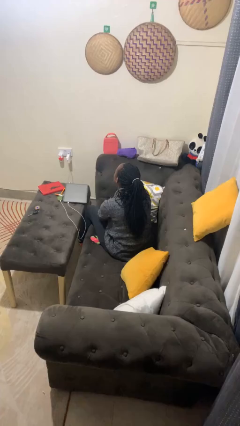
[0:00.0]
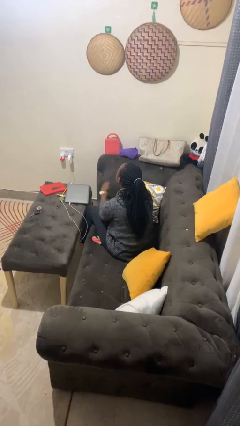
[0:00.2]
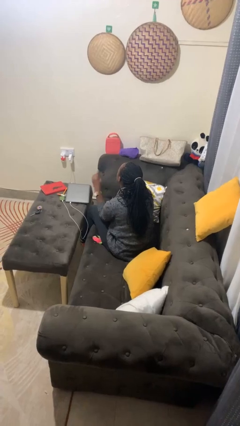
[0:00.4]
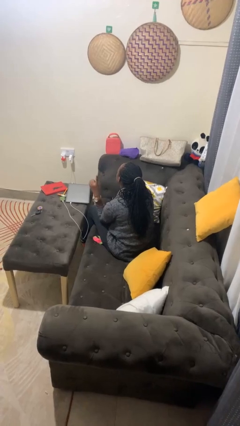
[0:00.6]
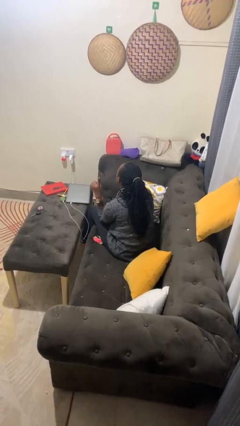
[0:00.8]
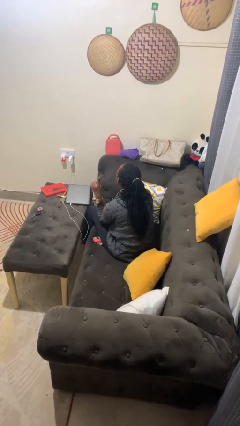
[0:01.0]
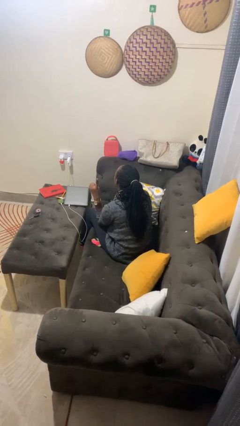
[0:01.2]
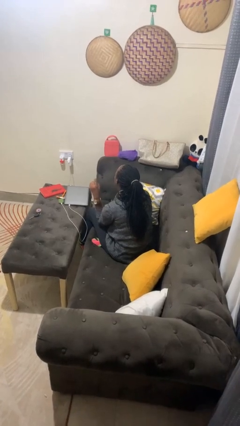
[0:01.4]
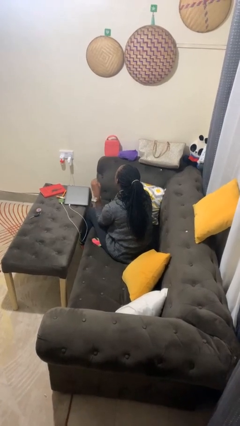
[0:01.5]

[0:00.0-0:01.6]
person gestures number one

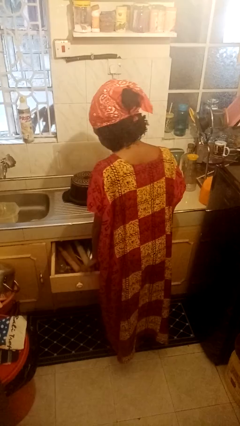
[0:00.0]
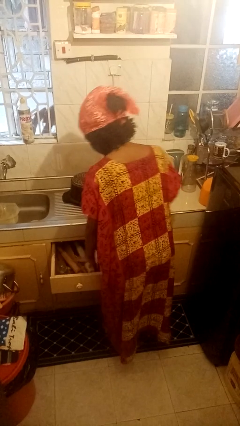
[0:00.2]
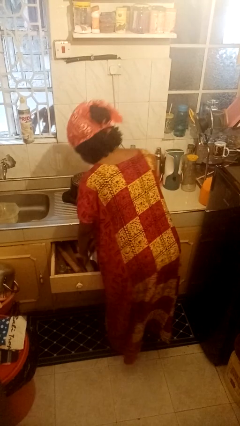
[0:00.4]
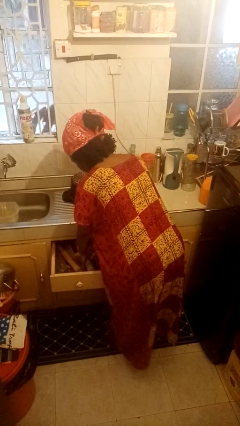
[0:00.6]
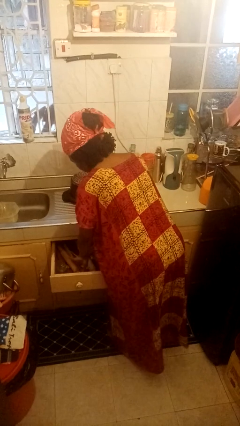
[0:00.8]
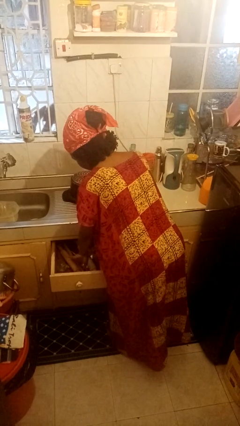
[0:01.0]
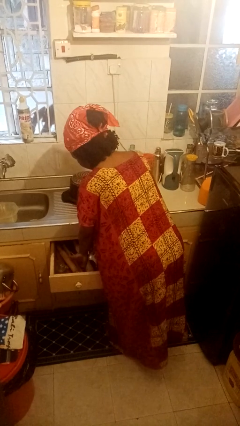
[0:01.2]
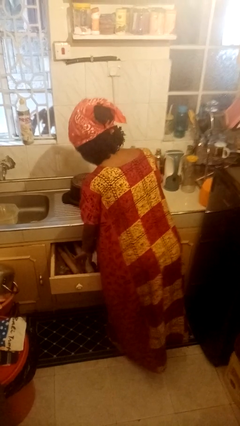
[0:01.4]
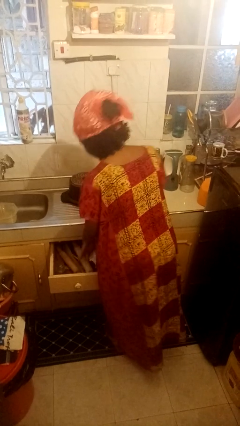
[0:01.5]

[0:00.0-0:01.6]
person searches in kitchen drawer

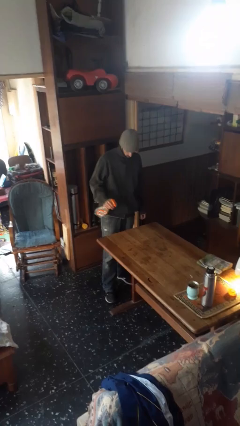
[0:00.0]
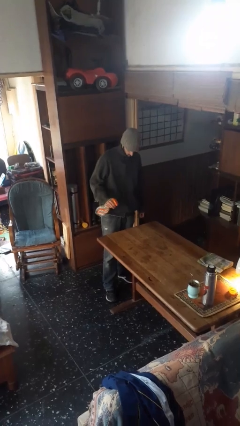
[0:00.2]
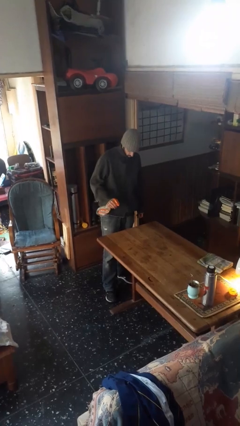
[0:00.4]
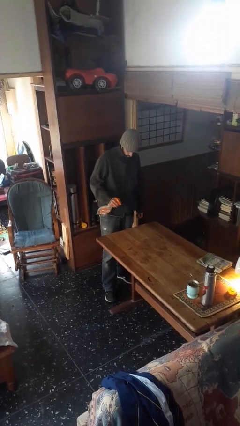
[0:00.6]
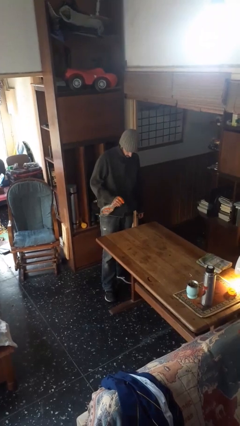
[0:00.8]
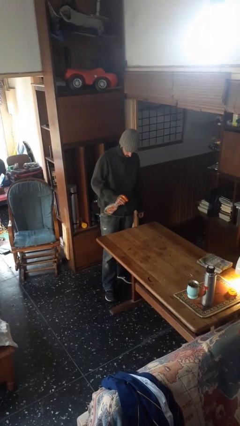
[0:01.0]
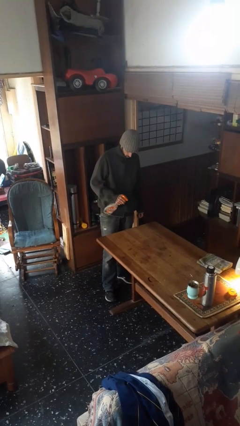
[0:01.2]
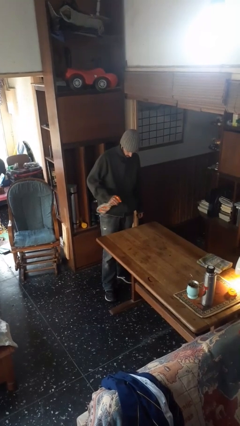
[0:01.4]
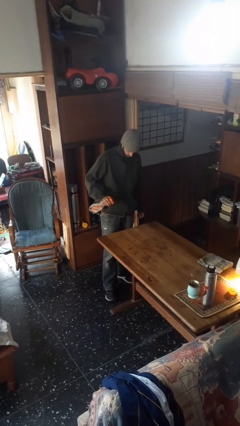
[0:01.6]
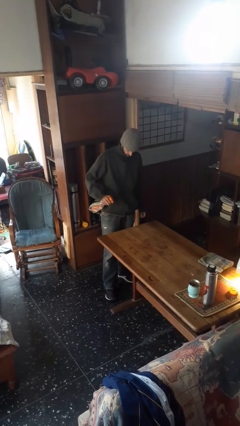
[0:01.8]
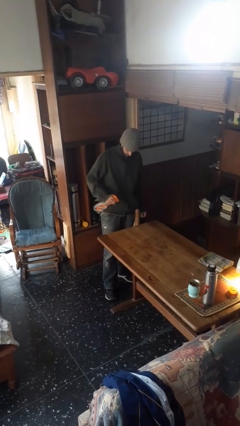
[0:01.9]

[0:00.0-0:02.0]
person sprays from bottle

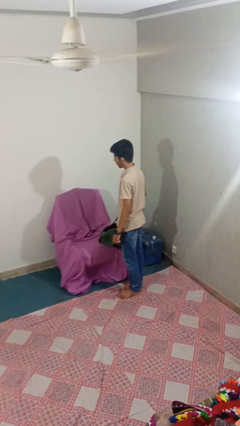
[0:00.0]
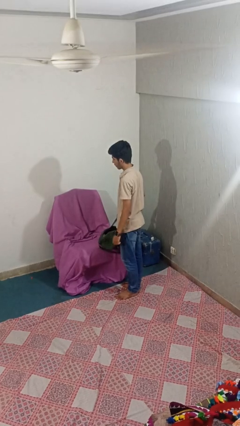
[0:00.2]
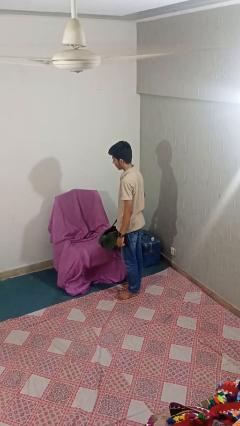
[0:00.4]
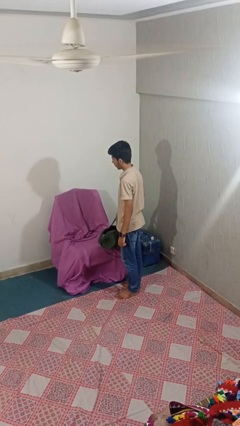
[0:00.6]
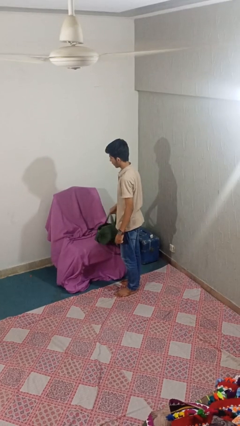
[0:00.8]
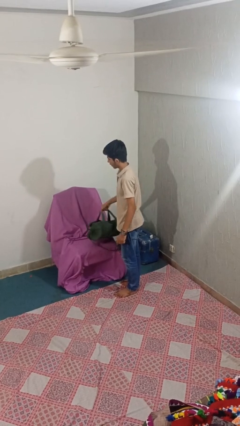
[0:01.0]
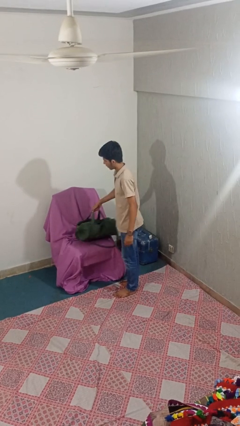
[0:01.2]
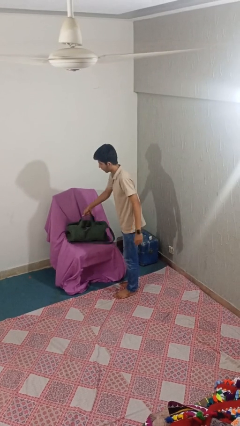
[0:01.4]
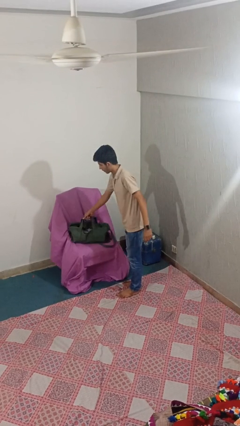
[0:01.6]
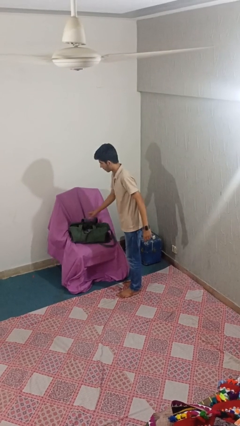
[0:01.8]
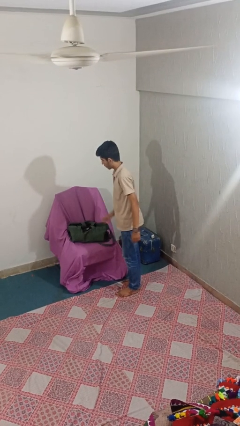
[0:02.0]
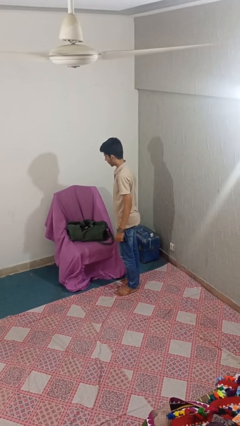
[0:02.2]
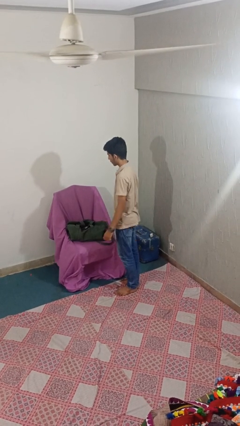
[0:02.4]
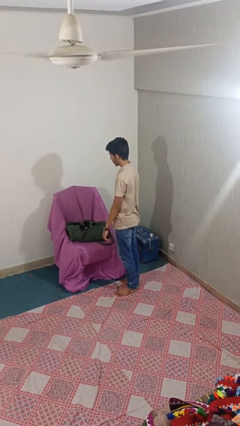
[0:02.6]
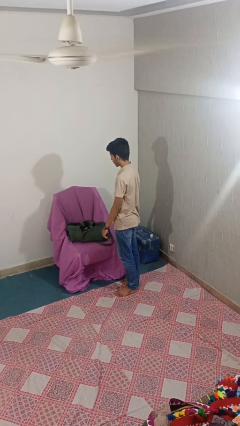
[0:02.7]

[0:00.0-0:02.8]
person puts down object on couch

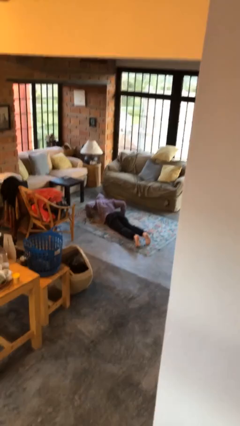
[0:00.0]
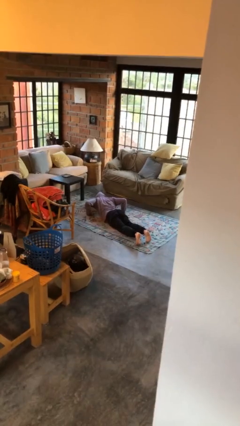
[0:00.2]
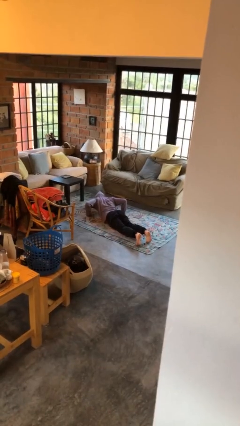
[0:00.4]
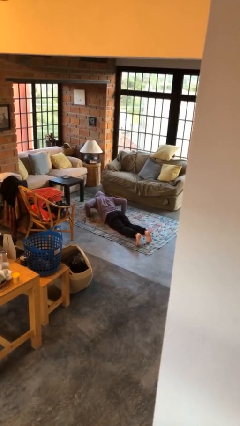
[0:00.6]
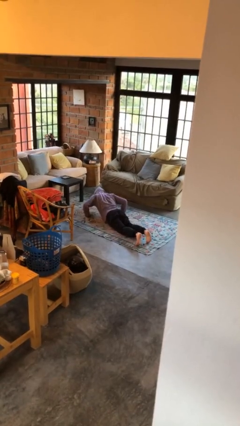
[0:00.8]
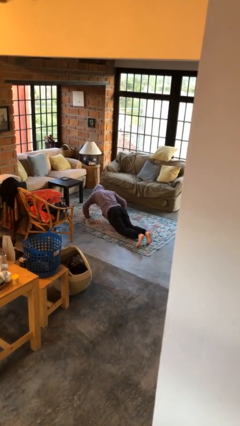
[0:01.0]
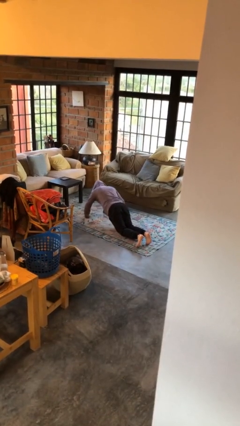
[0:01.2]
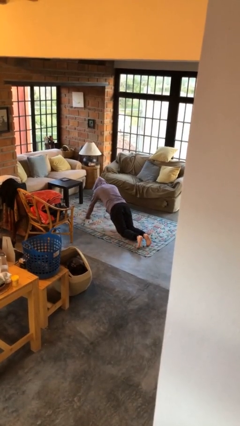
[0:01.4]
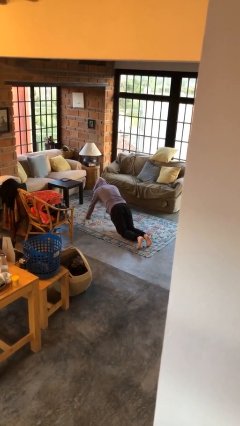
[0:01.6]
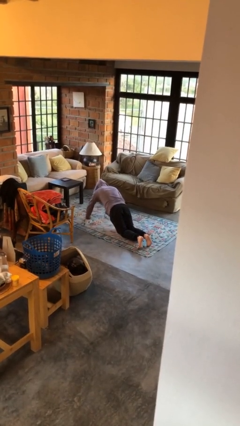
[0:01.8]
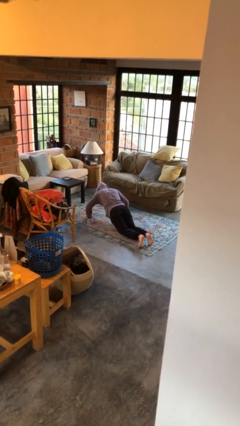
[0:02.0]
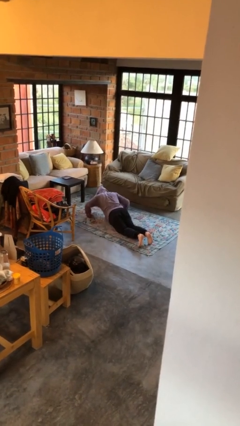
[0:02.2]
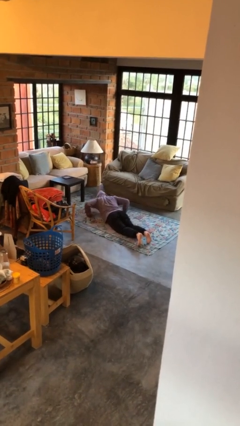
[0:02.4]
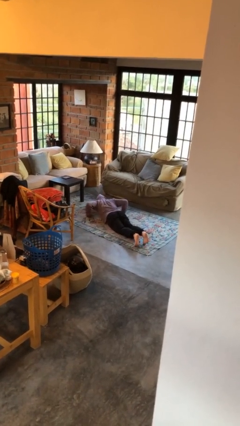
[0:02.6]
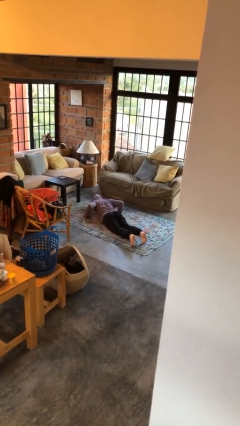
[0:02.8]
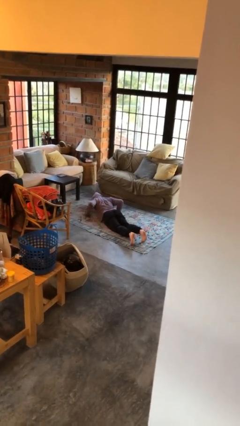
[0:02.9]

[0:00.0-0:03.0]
person exercises with pushup

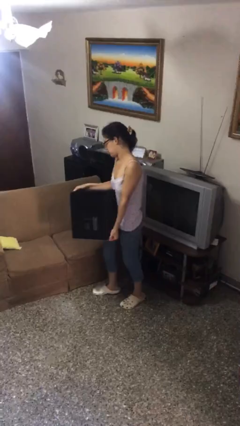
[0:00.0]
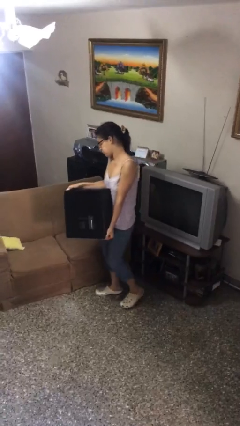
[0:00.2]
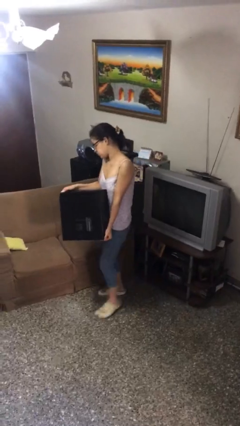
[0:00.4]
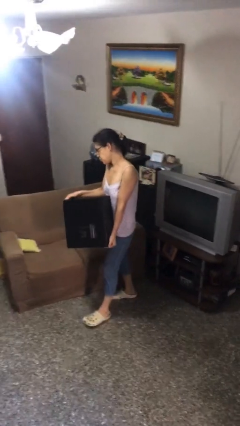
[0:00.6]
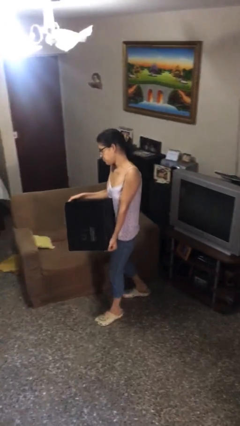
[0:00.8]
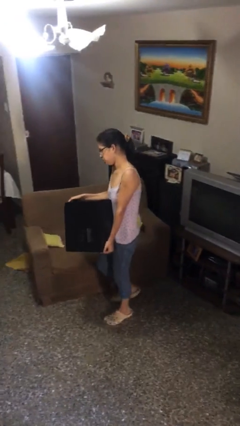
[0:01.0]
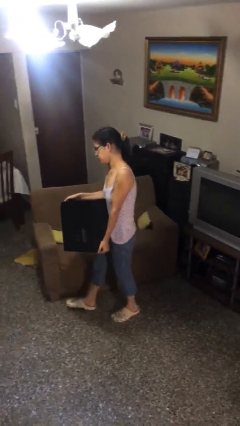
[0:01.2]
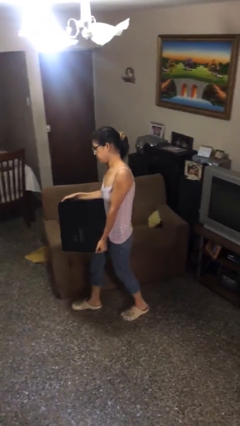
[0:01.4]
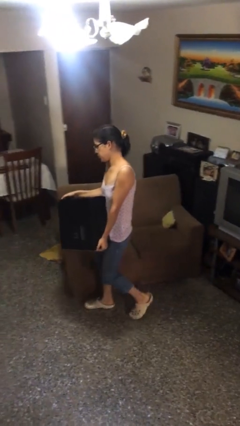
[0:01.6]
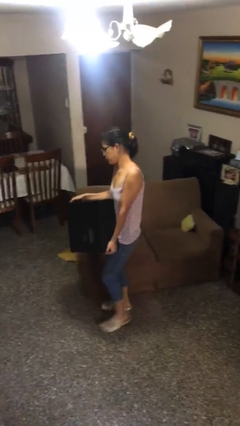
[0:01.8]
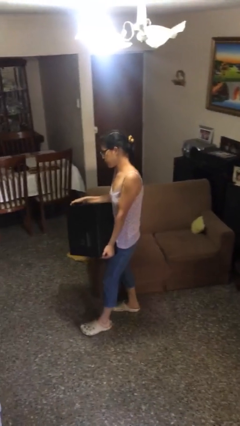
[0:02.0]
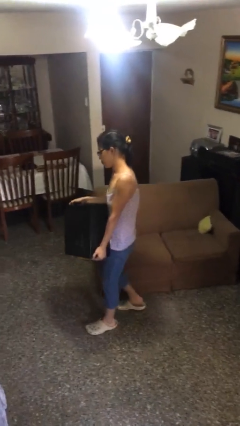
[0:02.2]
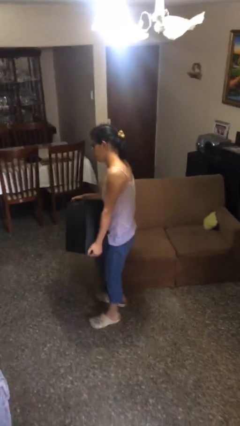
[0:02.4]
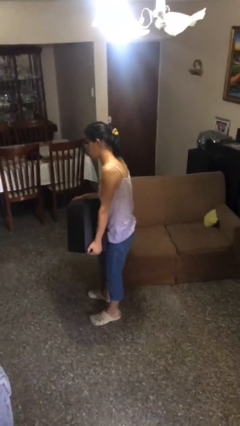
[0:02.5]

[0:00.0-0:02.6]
person carries heavy object

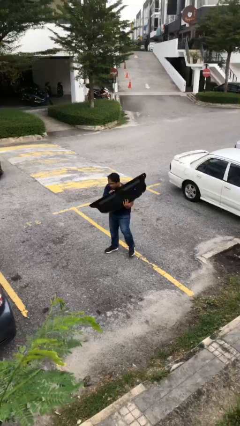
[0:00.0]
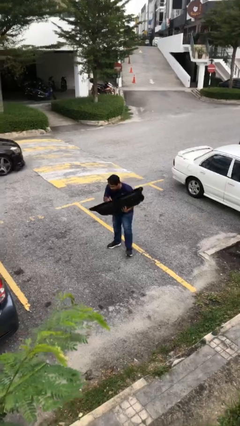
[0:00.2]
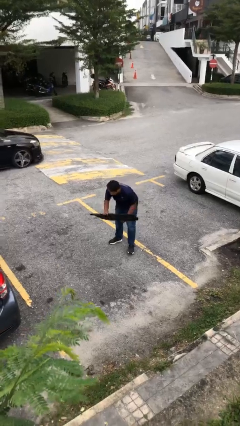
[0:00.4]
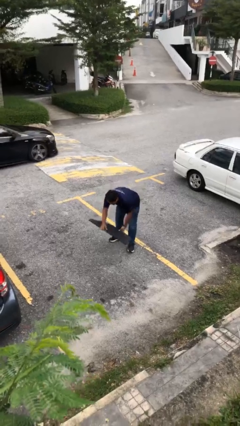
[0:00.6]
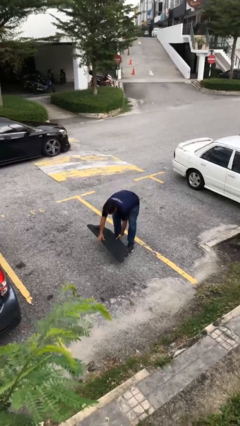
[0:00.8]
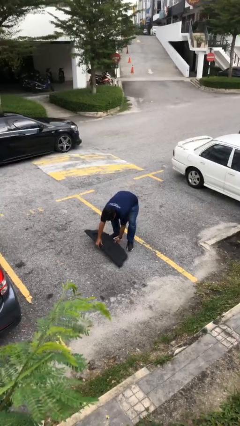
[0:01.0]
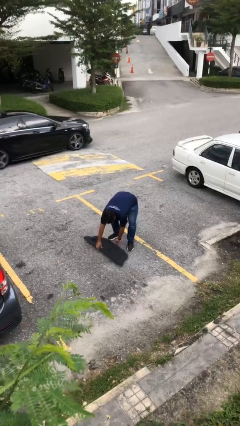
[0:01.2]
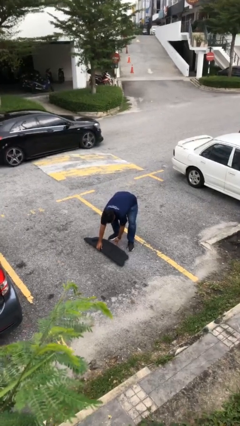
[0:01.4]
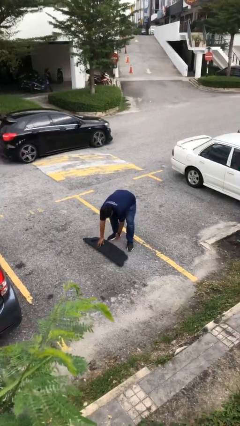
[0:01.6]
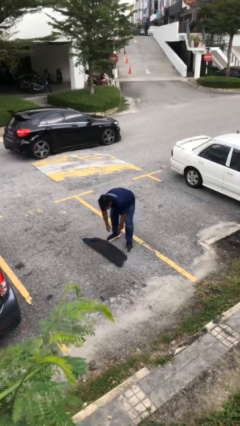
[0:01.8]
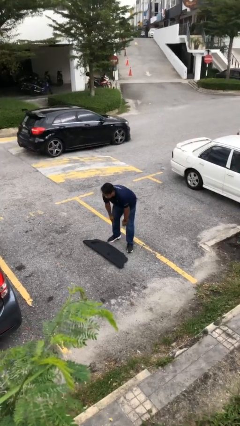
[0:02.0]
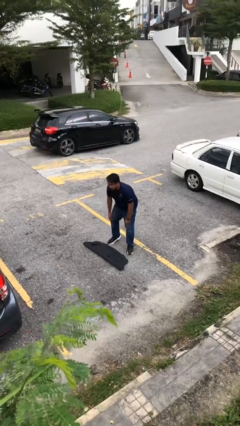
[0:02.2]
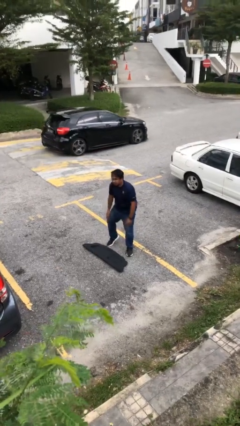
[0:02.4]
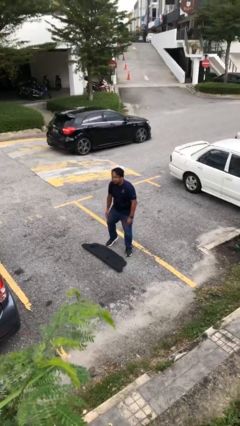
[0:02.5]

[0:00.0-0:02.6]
person puts down object on floor

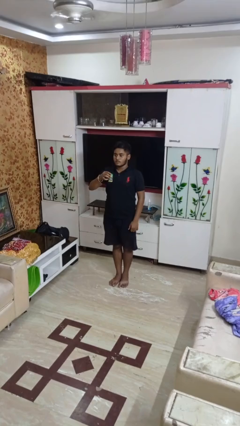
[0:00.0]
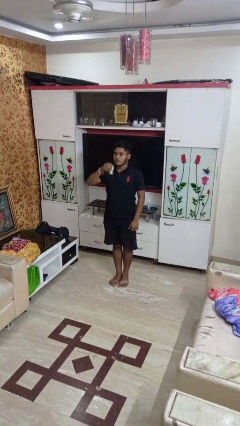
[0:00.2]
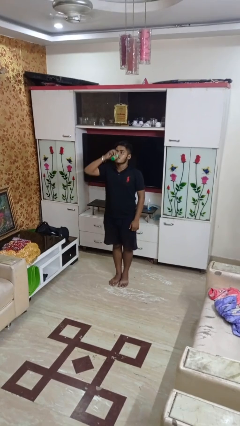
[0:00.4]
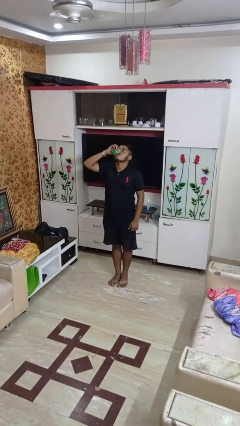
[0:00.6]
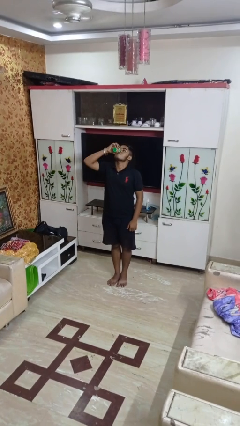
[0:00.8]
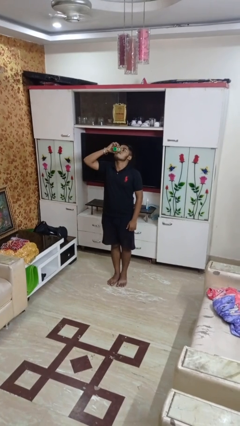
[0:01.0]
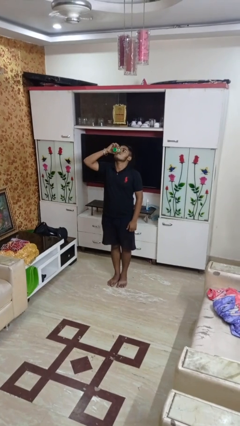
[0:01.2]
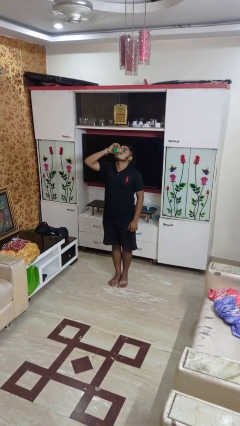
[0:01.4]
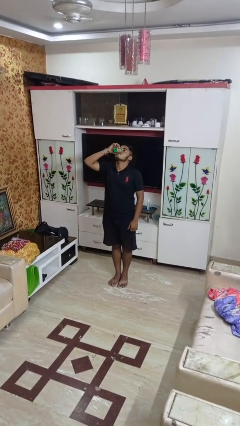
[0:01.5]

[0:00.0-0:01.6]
person drinks from beverage can
